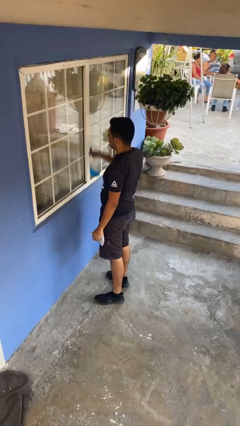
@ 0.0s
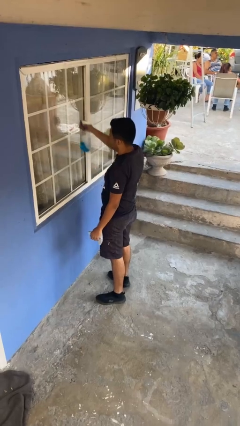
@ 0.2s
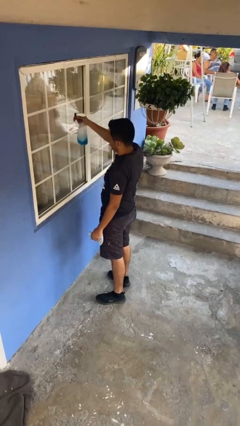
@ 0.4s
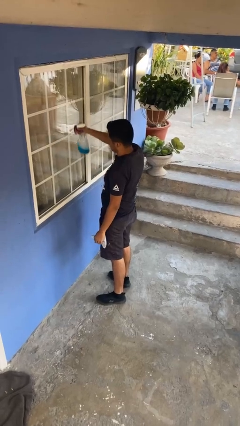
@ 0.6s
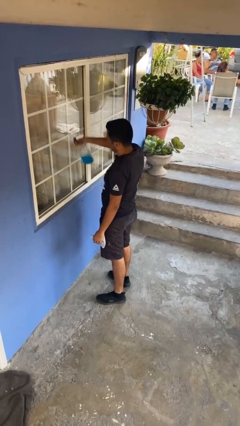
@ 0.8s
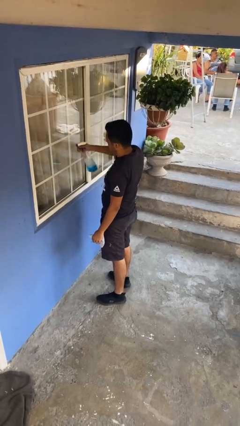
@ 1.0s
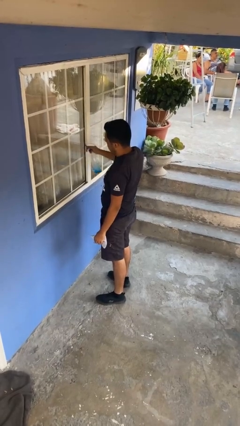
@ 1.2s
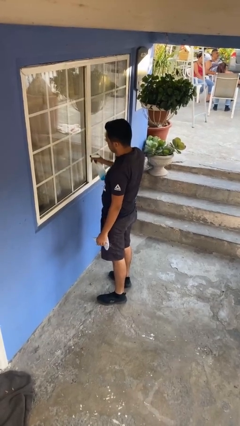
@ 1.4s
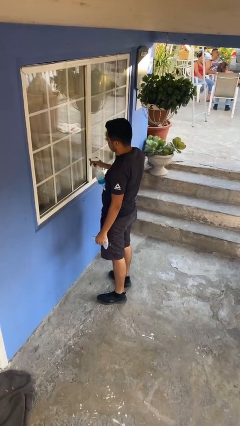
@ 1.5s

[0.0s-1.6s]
person sprays from bottle

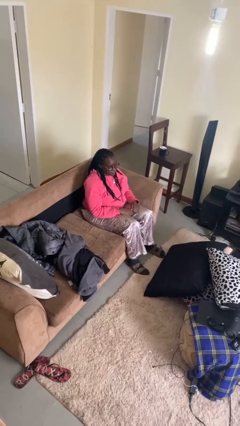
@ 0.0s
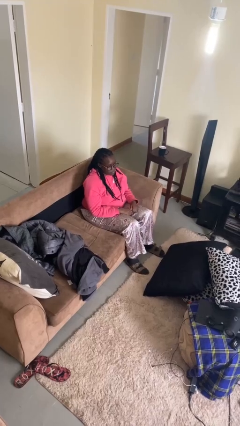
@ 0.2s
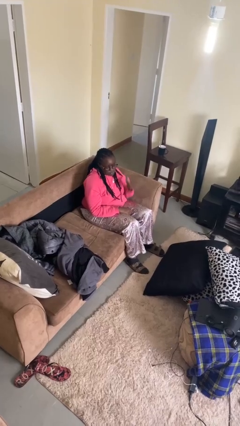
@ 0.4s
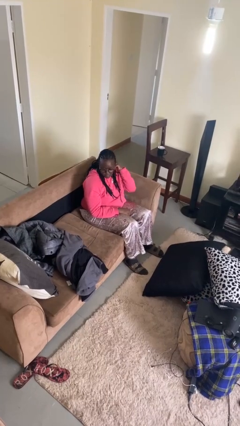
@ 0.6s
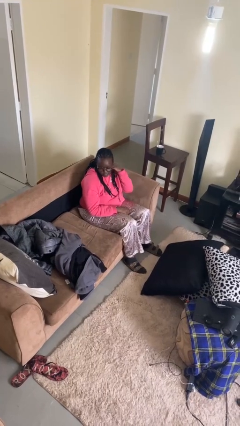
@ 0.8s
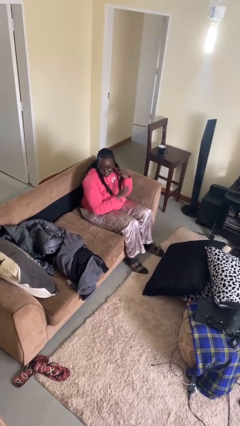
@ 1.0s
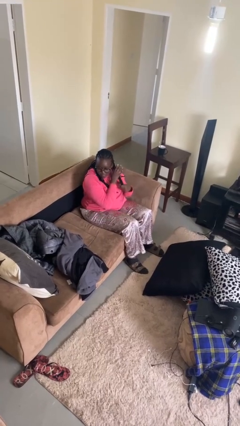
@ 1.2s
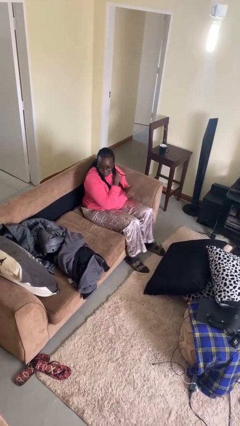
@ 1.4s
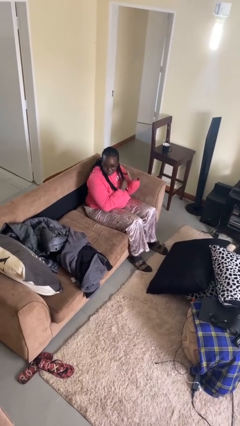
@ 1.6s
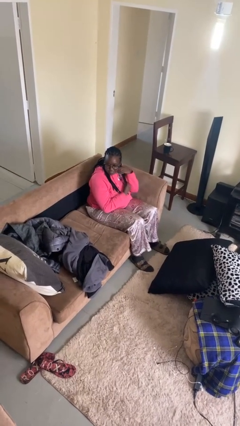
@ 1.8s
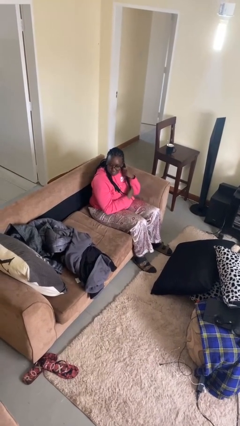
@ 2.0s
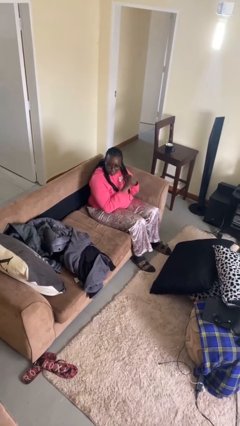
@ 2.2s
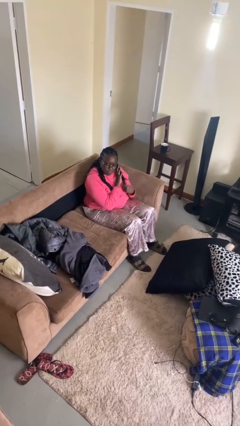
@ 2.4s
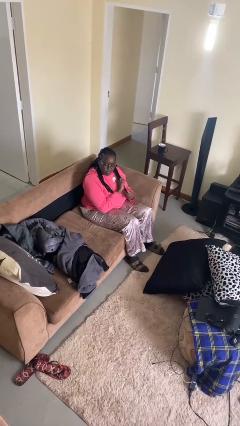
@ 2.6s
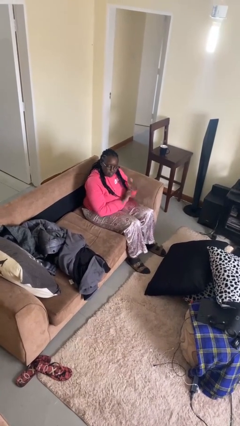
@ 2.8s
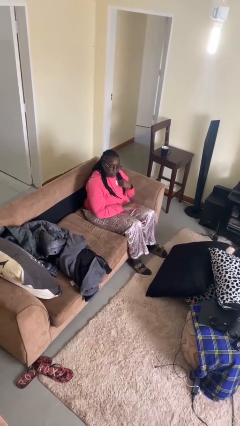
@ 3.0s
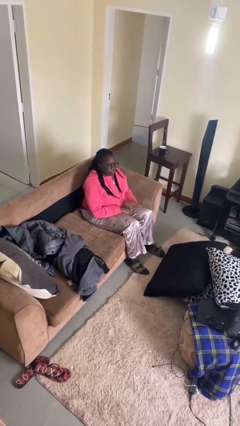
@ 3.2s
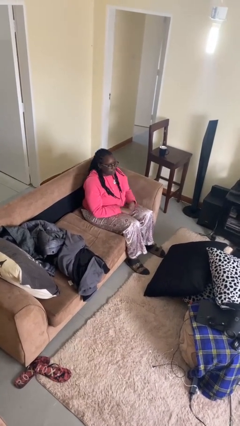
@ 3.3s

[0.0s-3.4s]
person strokes hair

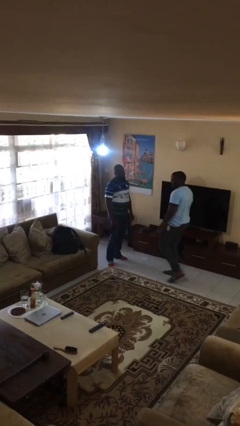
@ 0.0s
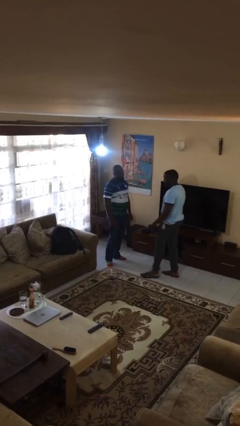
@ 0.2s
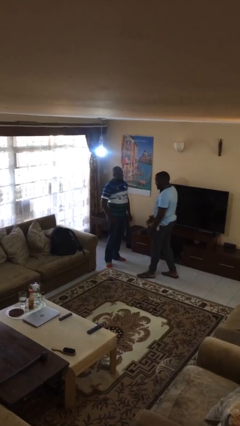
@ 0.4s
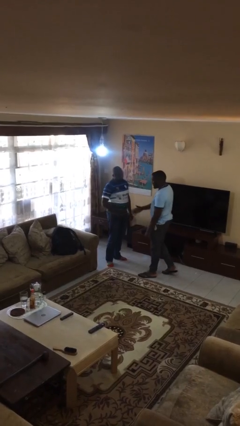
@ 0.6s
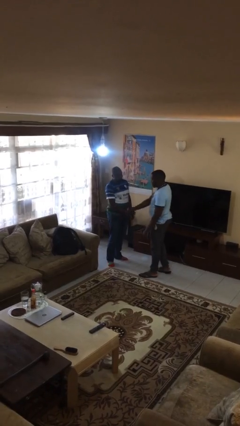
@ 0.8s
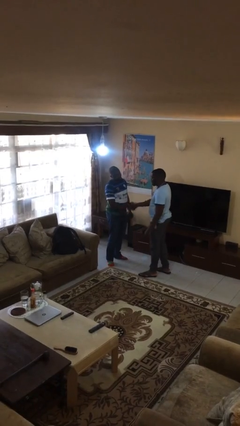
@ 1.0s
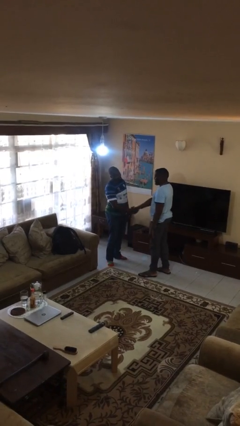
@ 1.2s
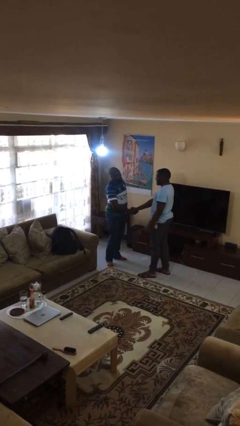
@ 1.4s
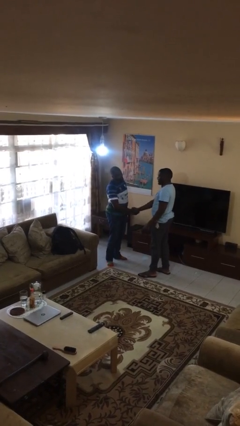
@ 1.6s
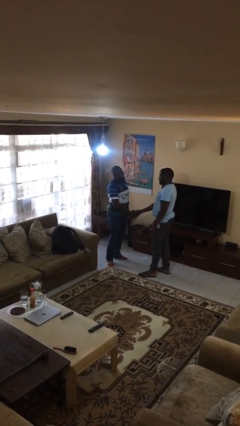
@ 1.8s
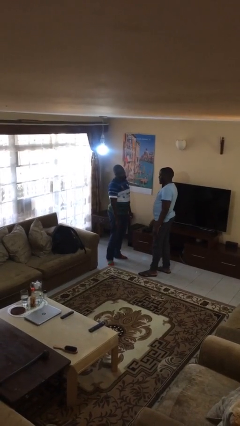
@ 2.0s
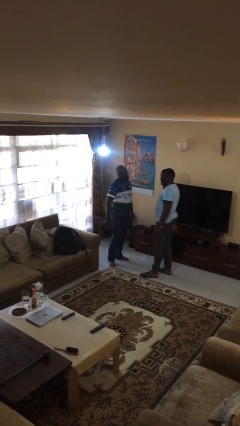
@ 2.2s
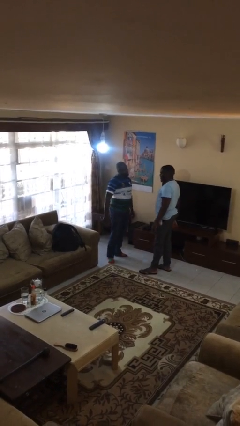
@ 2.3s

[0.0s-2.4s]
person shakes hand

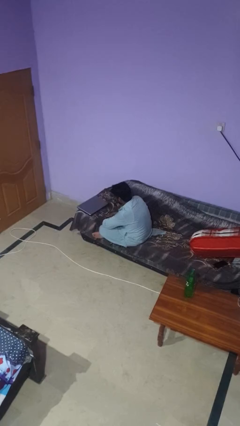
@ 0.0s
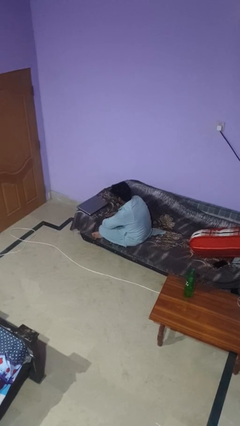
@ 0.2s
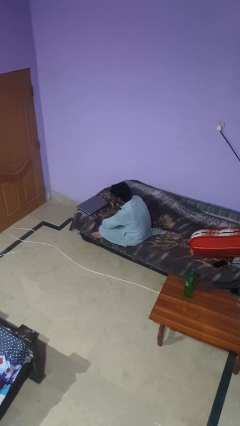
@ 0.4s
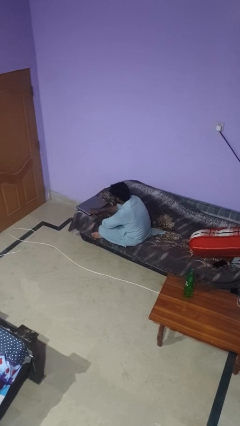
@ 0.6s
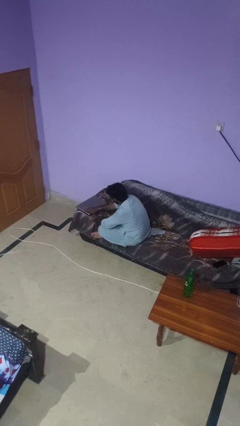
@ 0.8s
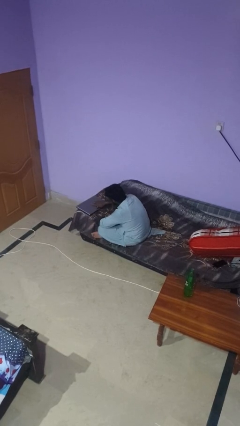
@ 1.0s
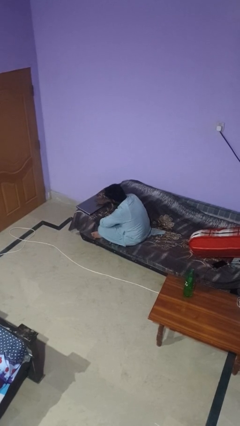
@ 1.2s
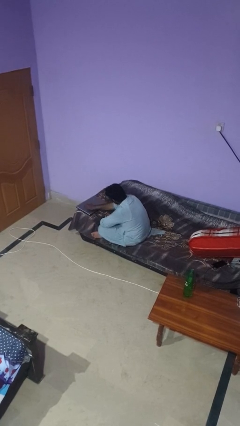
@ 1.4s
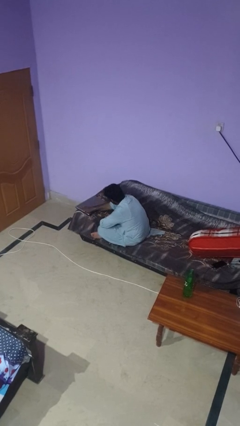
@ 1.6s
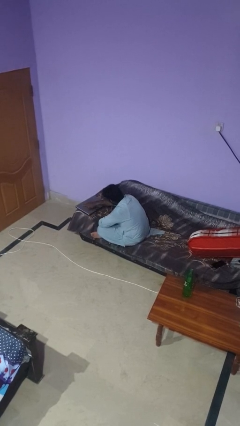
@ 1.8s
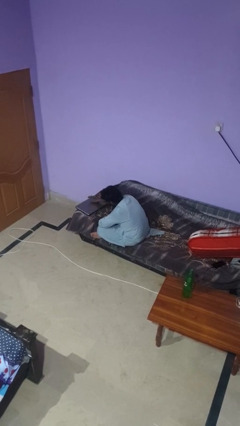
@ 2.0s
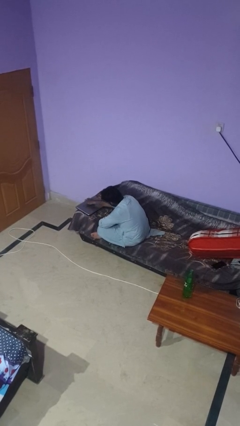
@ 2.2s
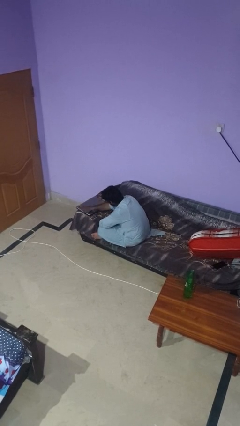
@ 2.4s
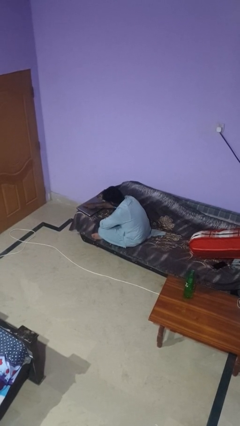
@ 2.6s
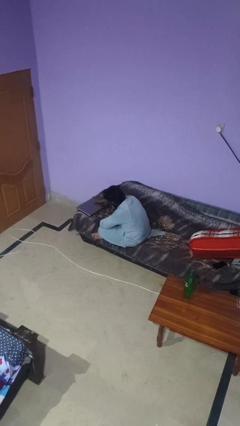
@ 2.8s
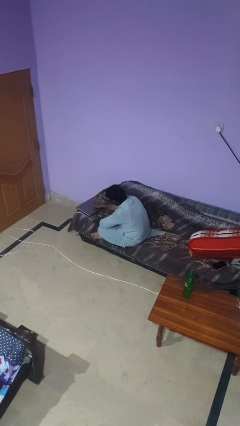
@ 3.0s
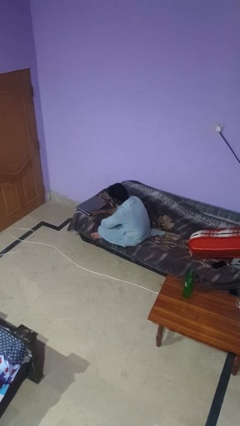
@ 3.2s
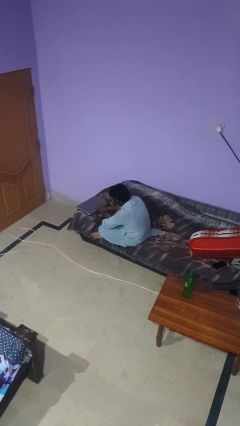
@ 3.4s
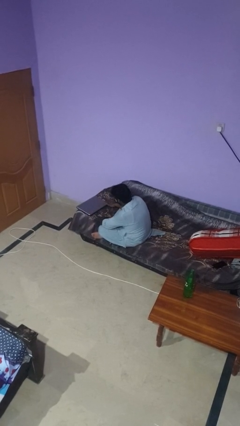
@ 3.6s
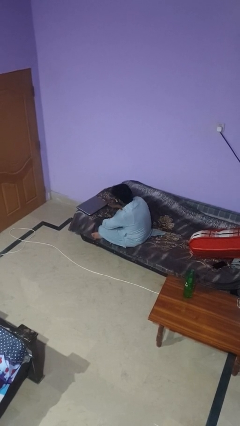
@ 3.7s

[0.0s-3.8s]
person waves hand over object

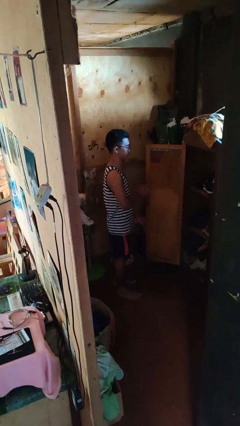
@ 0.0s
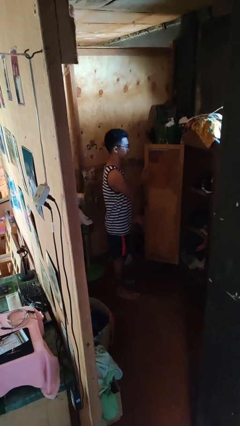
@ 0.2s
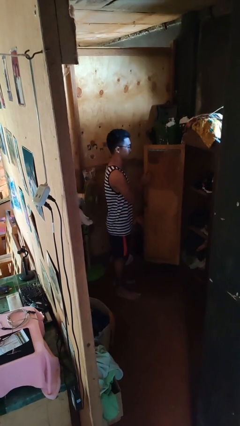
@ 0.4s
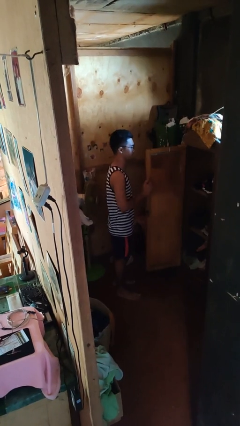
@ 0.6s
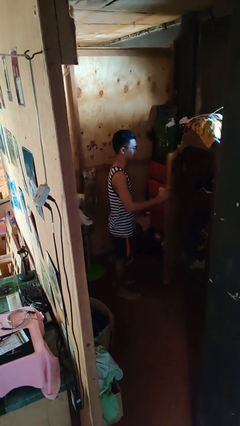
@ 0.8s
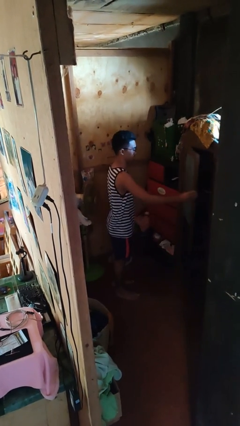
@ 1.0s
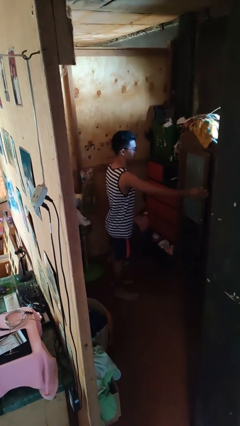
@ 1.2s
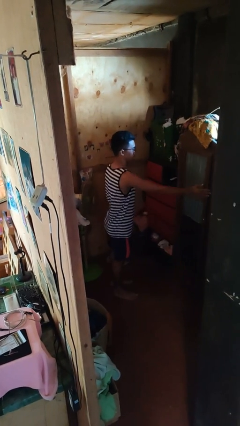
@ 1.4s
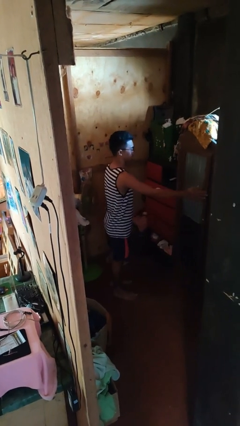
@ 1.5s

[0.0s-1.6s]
person closes closet door

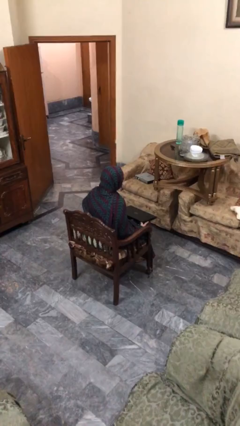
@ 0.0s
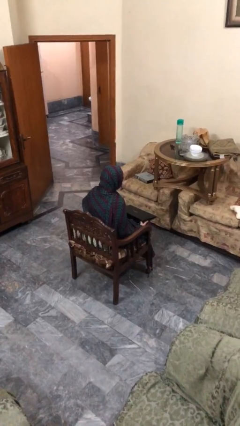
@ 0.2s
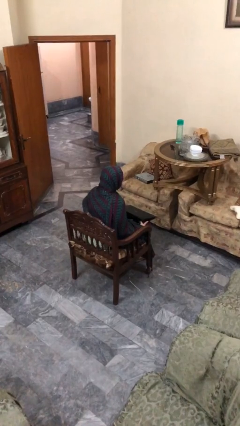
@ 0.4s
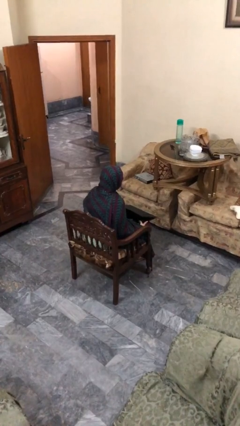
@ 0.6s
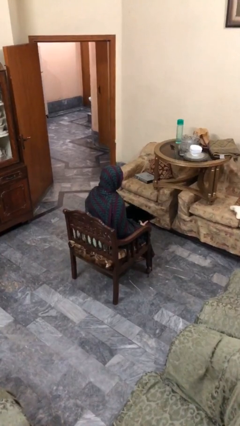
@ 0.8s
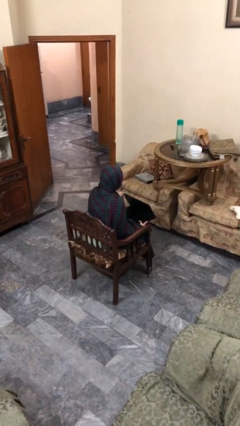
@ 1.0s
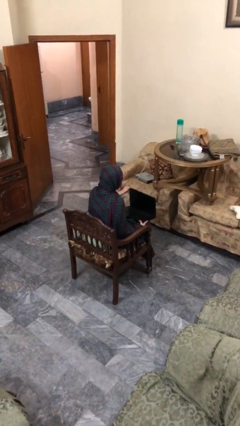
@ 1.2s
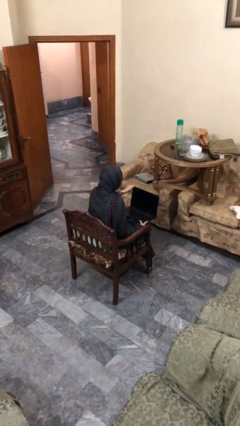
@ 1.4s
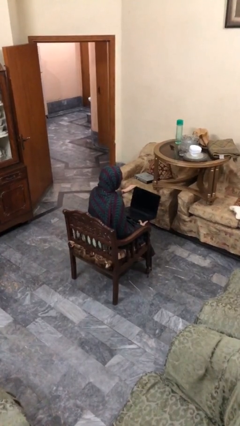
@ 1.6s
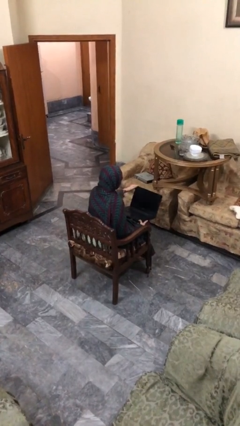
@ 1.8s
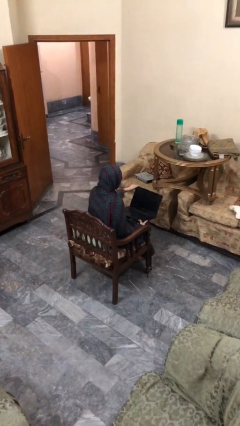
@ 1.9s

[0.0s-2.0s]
person opens laptop

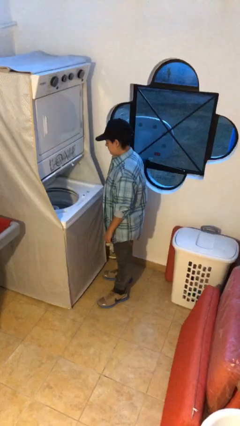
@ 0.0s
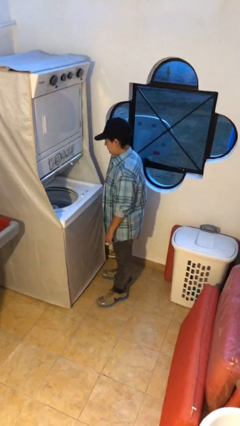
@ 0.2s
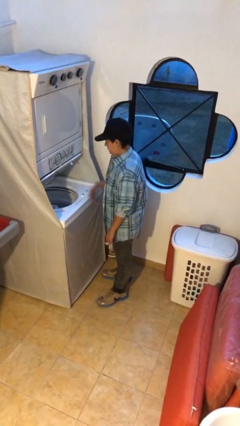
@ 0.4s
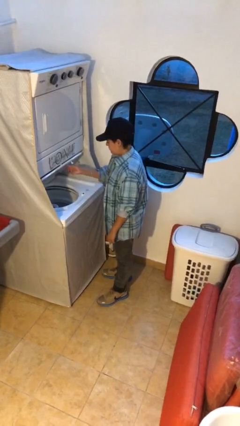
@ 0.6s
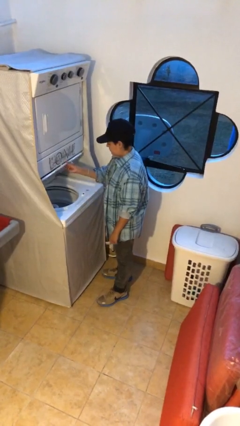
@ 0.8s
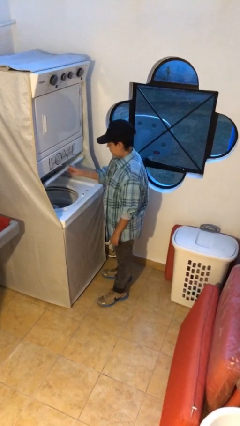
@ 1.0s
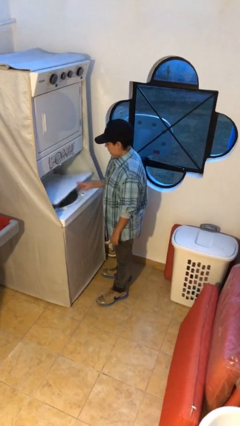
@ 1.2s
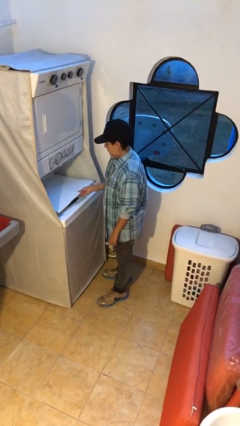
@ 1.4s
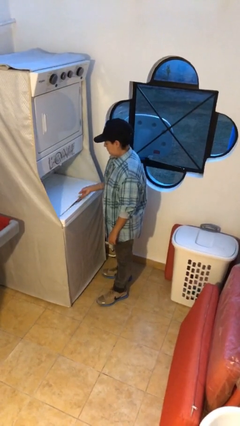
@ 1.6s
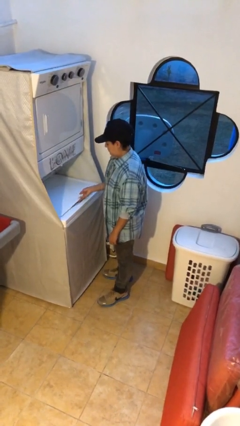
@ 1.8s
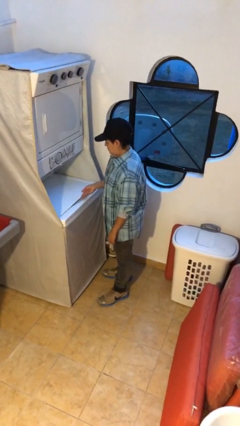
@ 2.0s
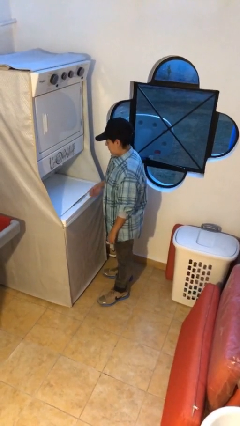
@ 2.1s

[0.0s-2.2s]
person closes clothes washer

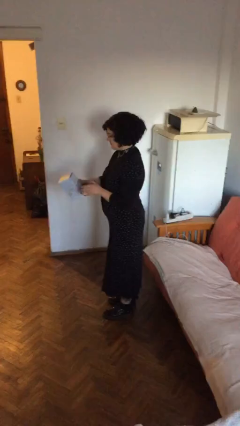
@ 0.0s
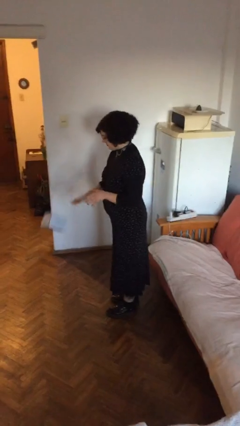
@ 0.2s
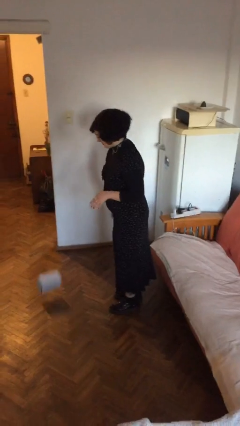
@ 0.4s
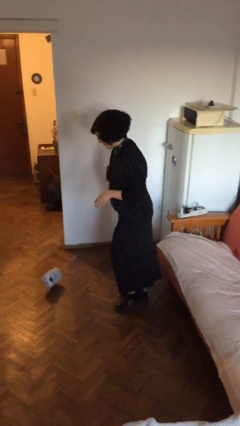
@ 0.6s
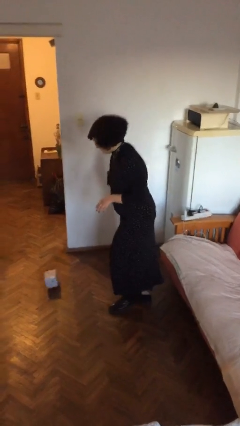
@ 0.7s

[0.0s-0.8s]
person throws object to ground
